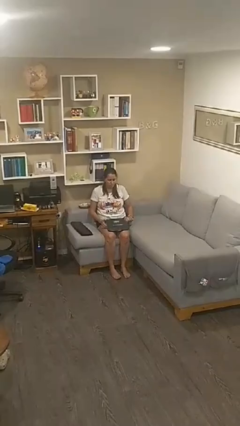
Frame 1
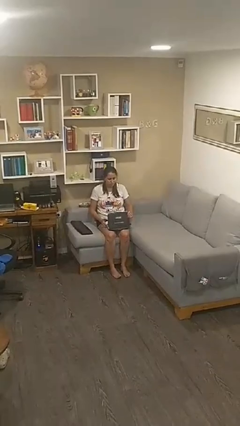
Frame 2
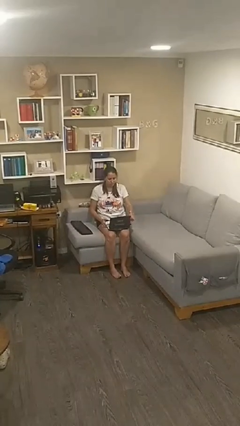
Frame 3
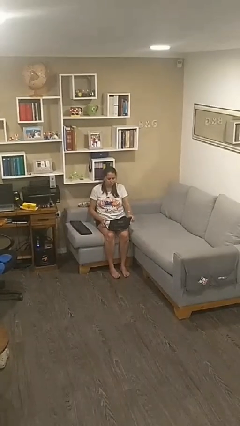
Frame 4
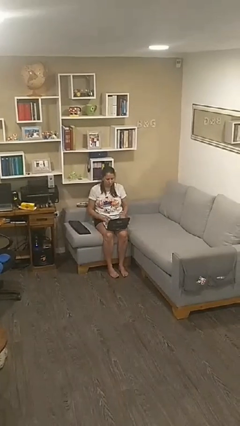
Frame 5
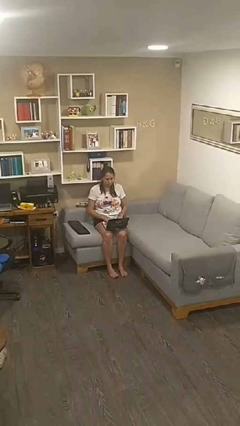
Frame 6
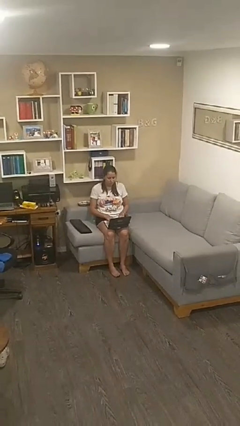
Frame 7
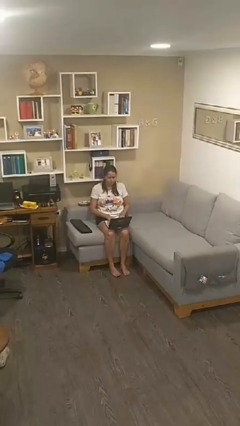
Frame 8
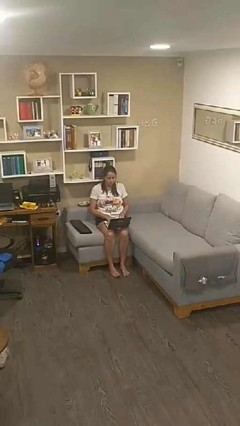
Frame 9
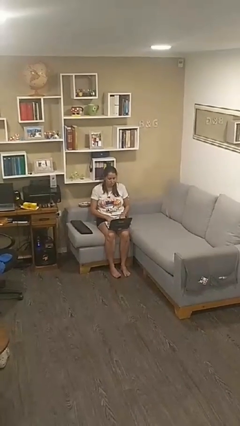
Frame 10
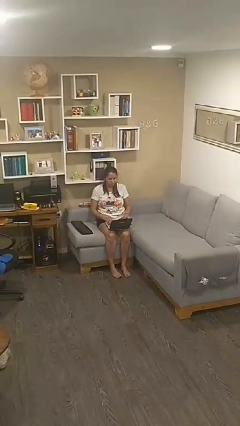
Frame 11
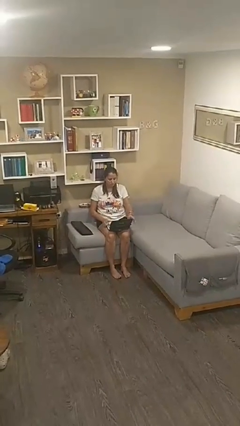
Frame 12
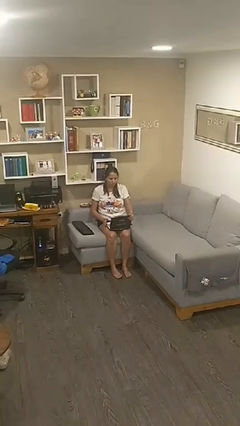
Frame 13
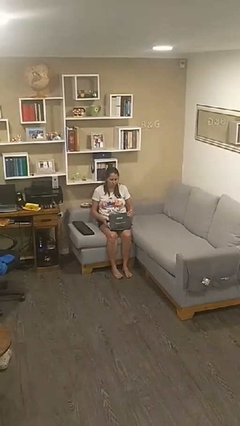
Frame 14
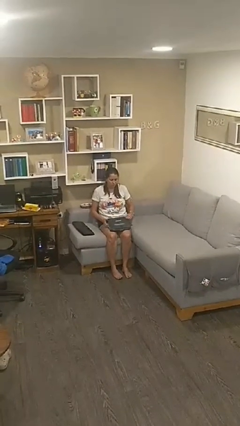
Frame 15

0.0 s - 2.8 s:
person interacts with laptop

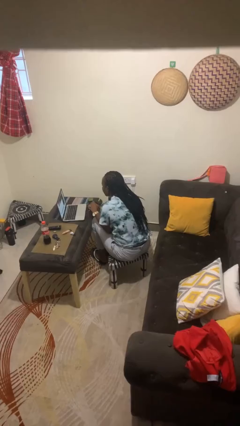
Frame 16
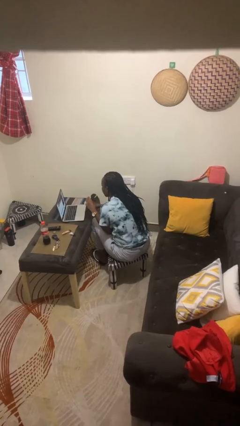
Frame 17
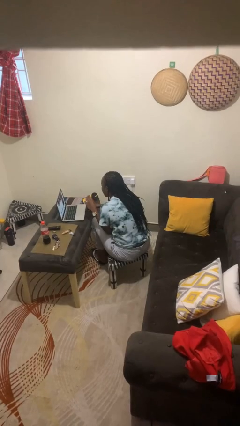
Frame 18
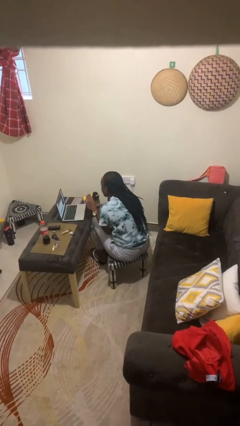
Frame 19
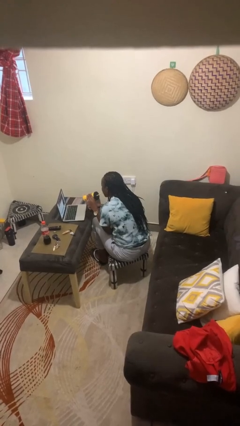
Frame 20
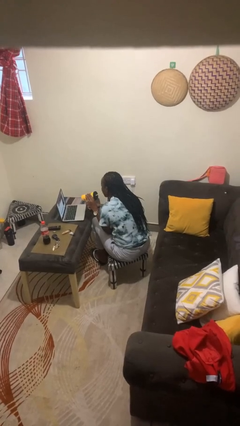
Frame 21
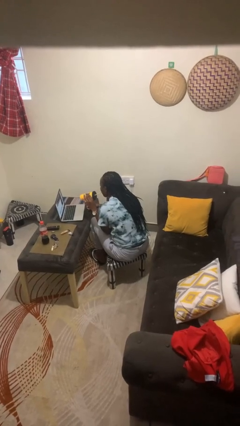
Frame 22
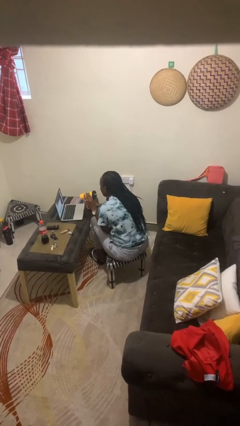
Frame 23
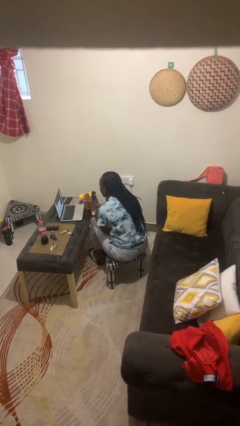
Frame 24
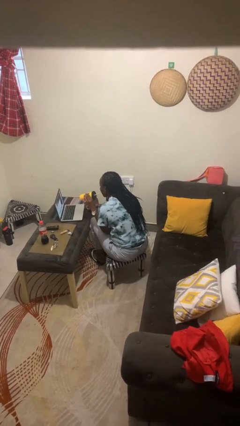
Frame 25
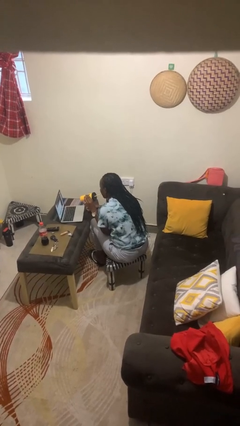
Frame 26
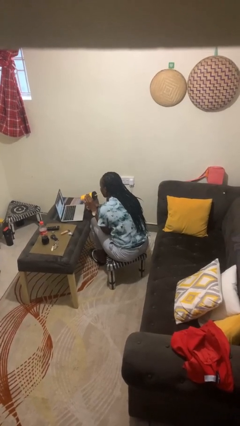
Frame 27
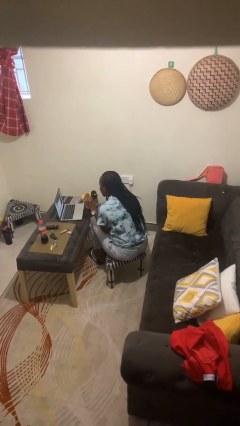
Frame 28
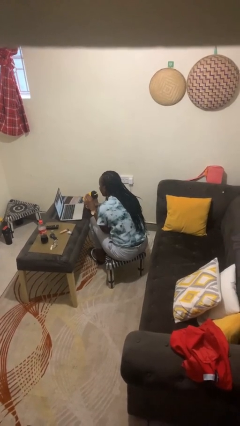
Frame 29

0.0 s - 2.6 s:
person drinks from straw

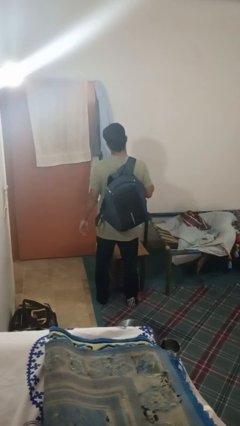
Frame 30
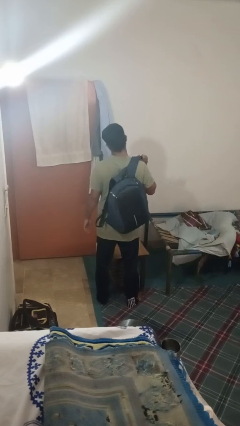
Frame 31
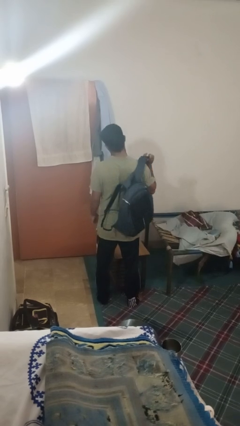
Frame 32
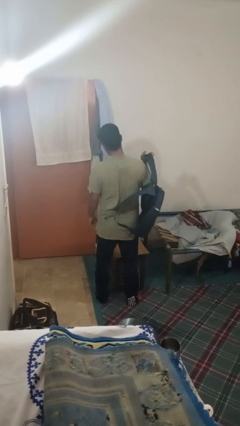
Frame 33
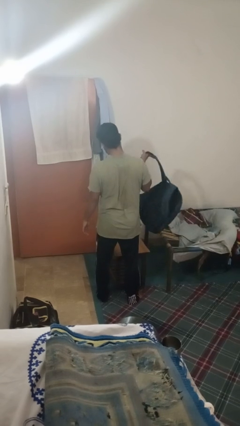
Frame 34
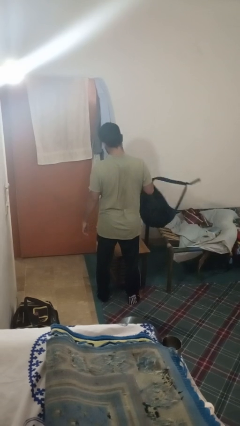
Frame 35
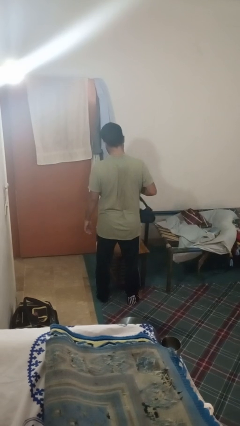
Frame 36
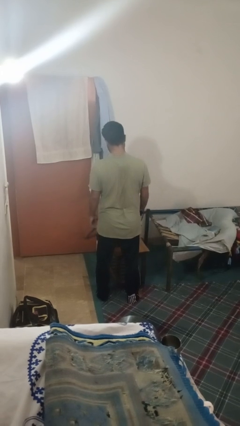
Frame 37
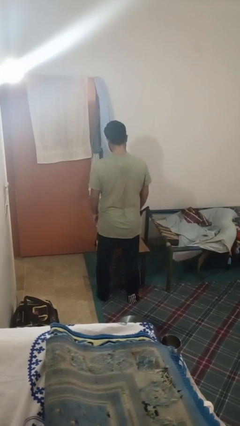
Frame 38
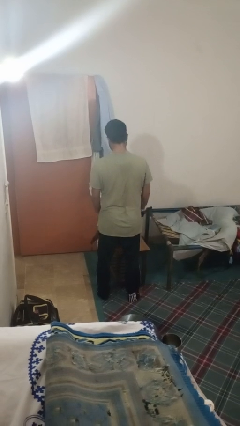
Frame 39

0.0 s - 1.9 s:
person takes off backpack

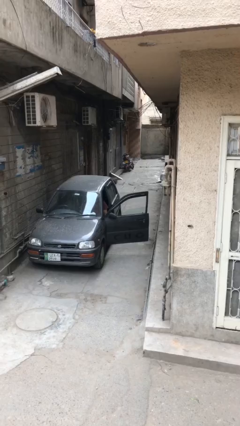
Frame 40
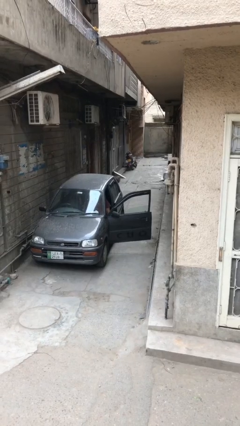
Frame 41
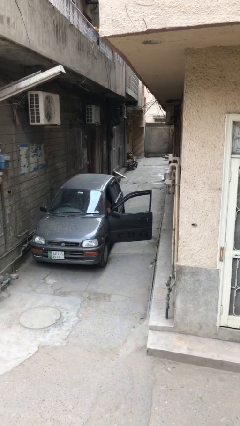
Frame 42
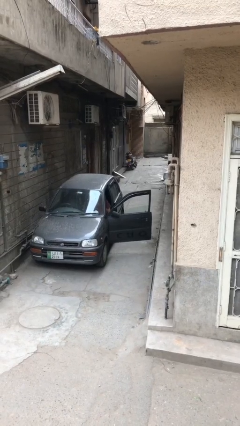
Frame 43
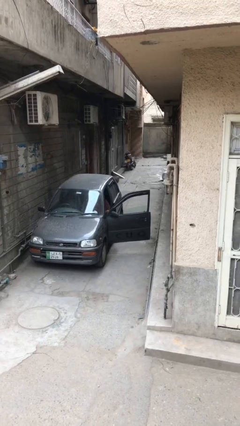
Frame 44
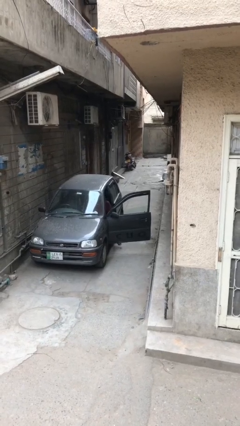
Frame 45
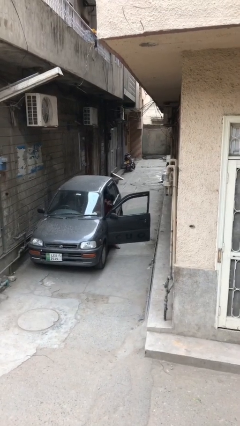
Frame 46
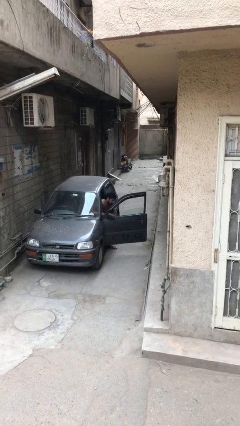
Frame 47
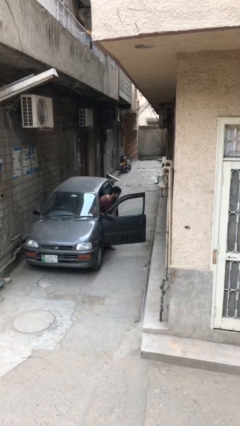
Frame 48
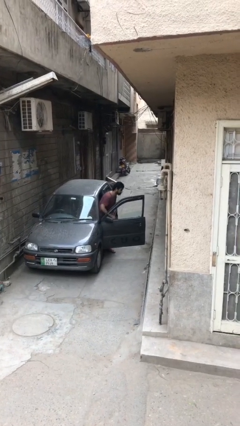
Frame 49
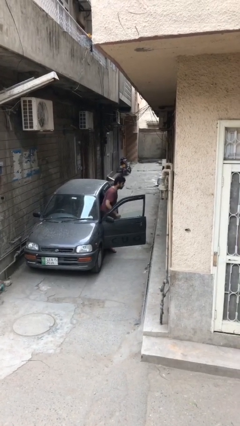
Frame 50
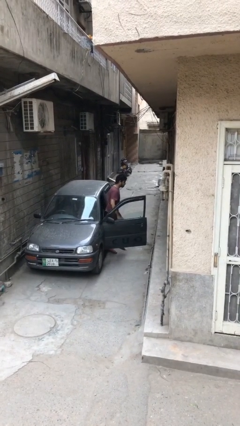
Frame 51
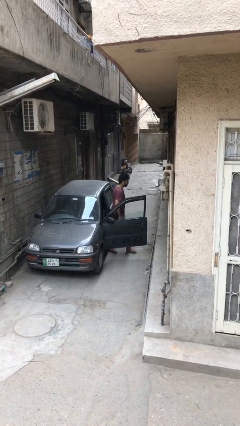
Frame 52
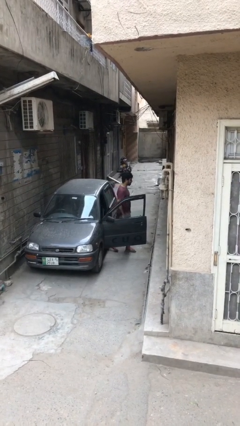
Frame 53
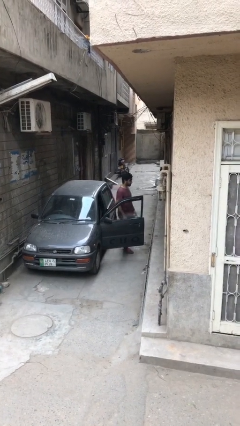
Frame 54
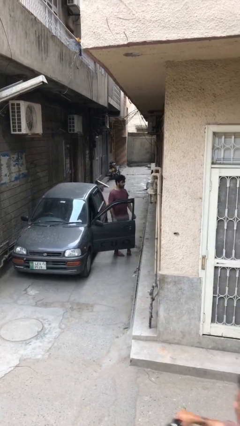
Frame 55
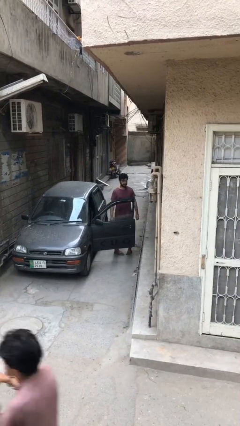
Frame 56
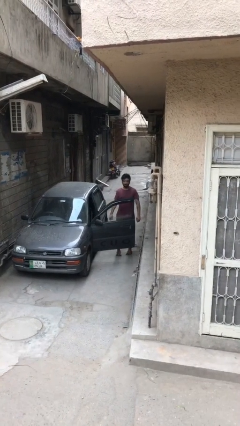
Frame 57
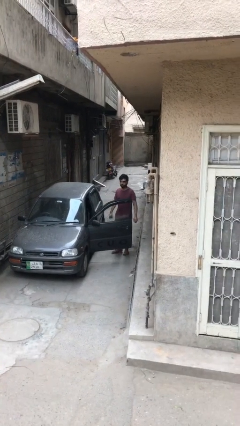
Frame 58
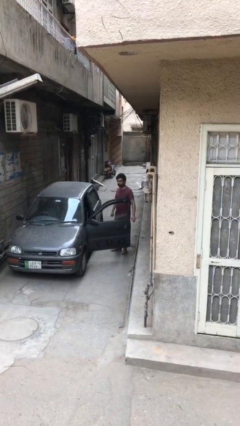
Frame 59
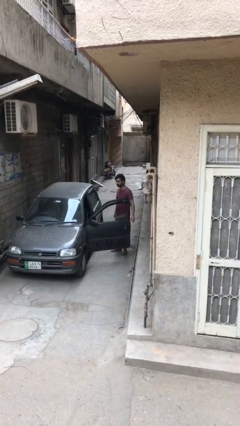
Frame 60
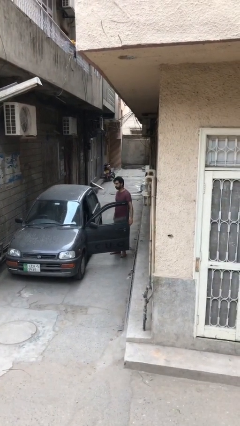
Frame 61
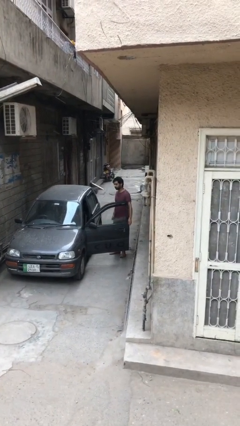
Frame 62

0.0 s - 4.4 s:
person exits car

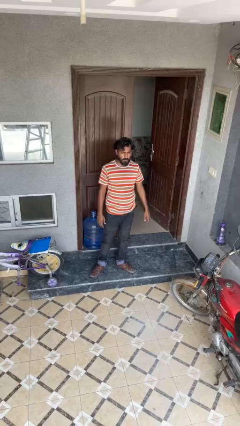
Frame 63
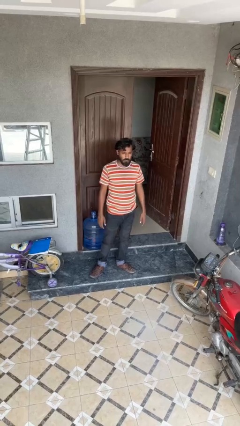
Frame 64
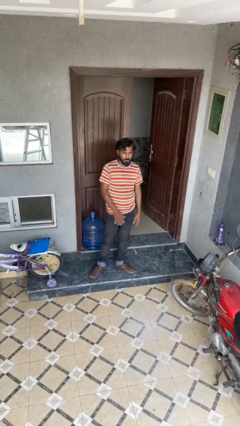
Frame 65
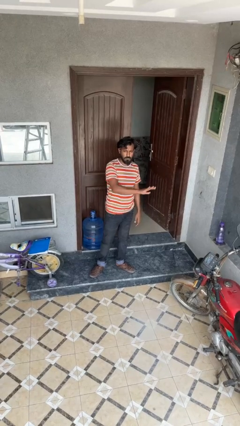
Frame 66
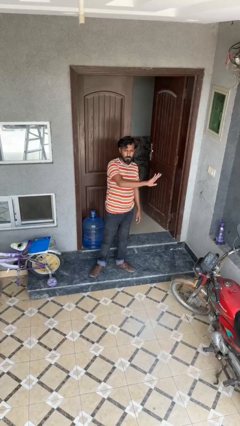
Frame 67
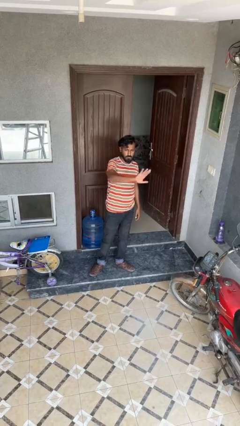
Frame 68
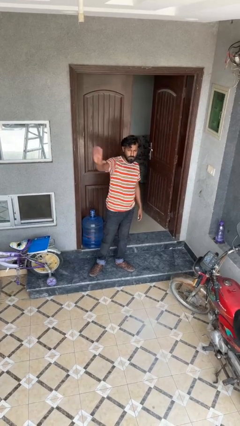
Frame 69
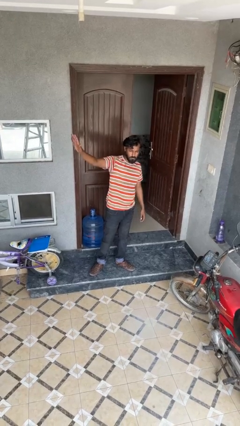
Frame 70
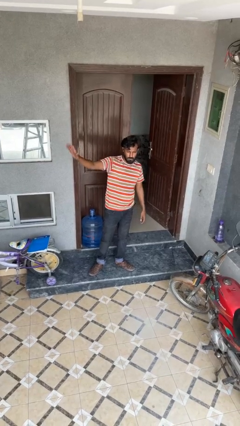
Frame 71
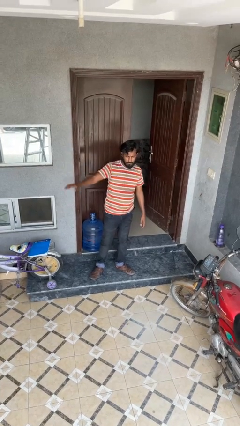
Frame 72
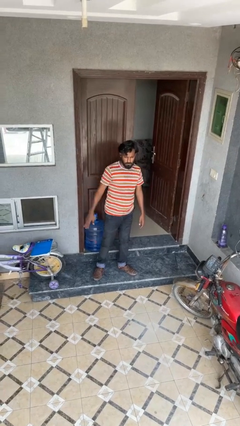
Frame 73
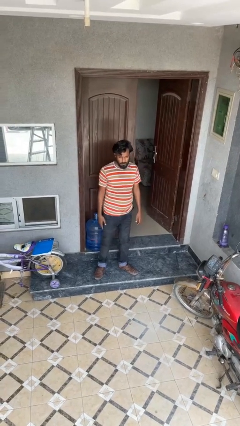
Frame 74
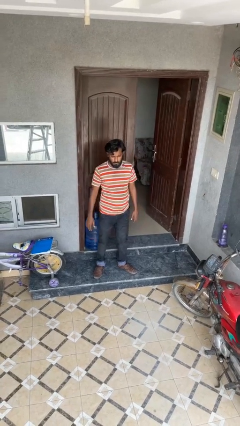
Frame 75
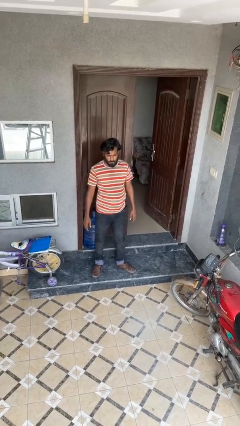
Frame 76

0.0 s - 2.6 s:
person gestures swipe right

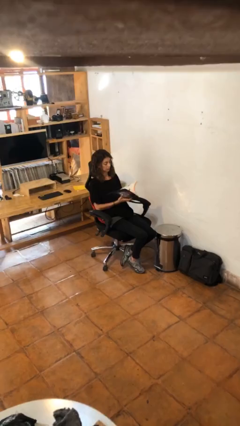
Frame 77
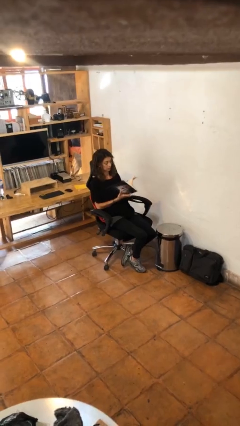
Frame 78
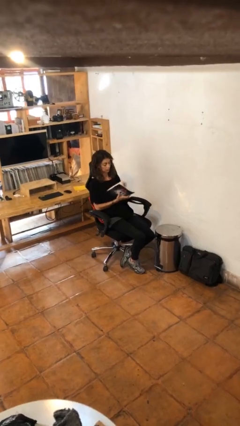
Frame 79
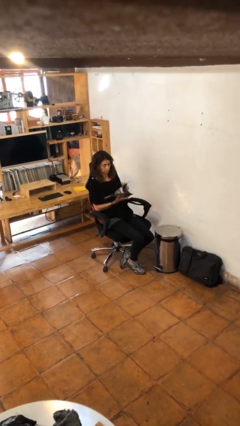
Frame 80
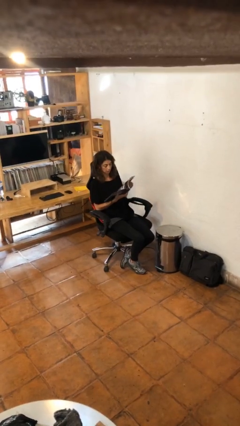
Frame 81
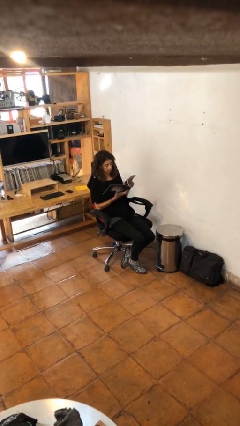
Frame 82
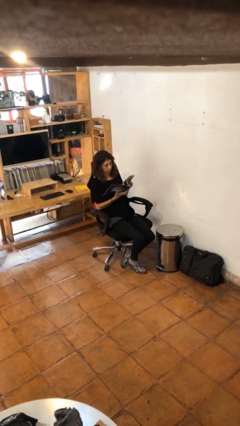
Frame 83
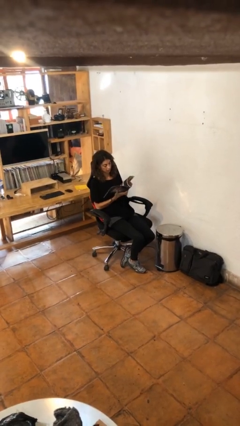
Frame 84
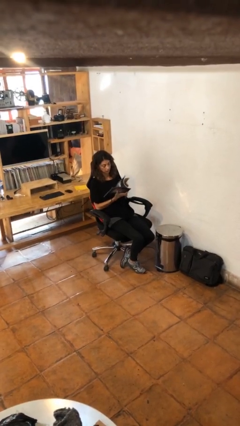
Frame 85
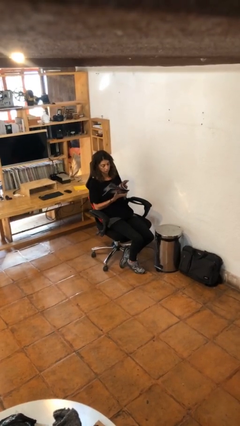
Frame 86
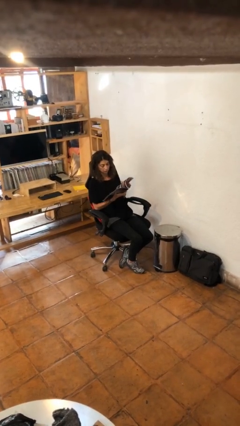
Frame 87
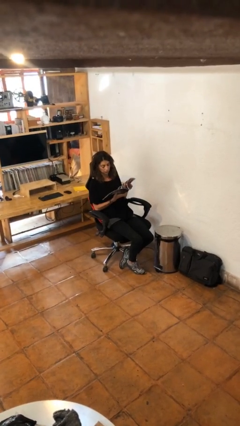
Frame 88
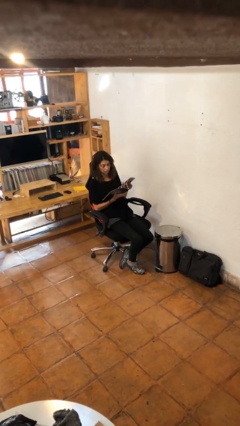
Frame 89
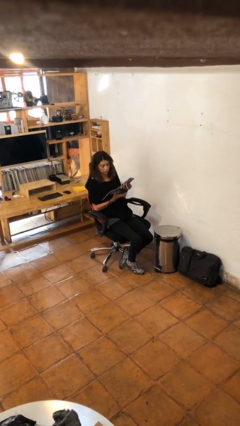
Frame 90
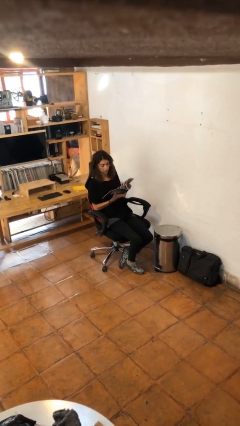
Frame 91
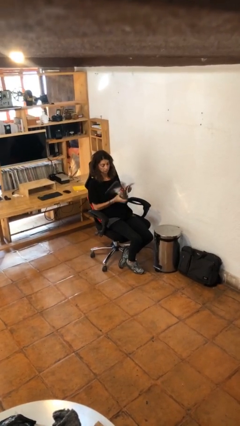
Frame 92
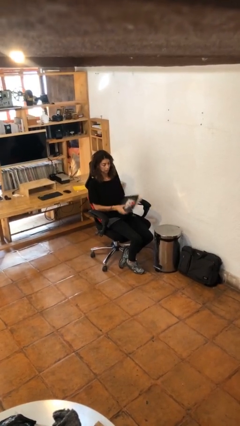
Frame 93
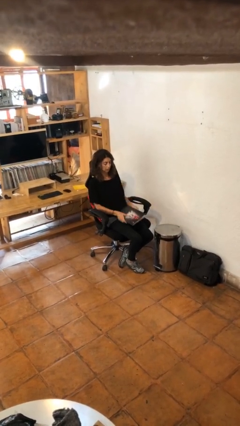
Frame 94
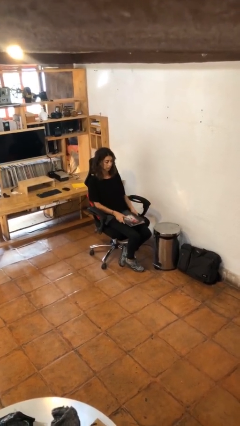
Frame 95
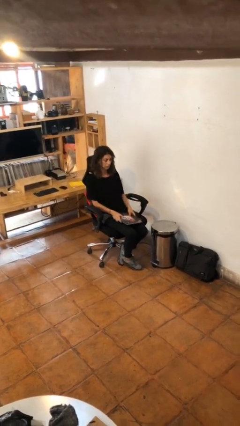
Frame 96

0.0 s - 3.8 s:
person reads magazine
